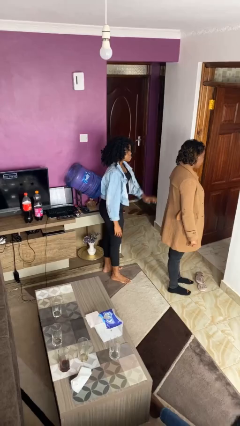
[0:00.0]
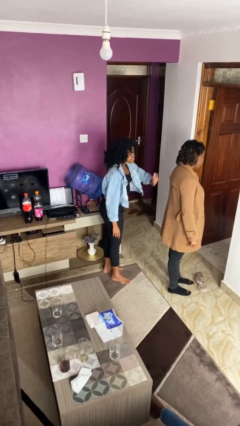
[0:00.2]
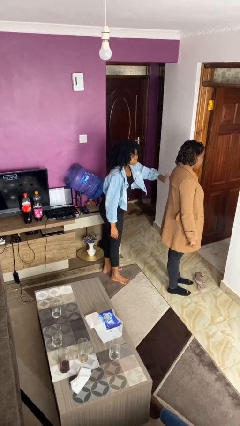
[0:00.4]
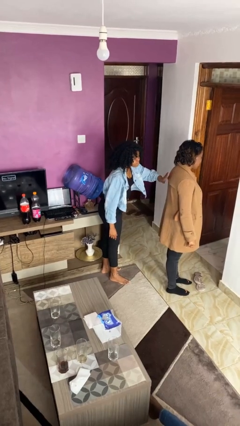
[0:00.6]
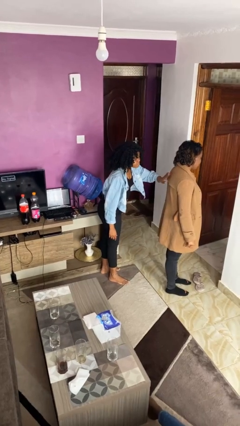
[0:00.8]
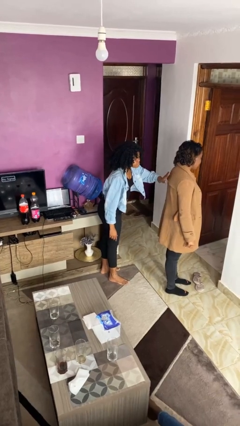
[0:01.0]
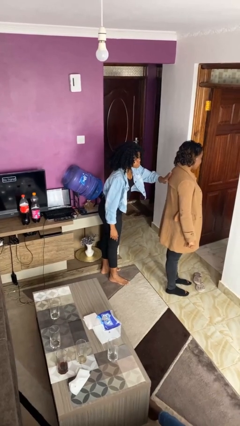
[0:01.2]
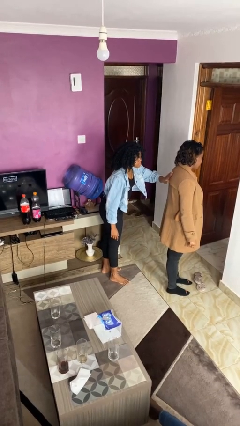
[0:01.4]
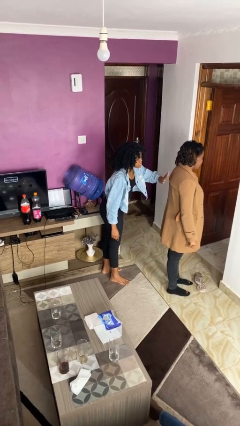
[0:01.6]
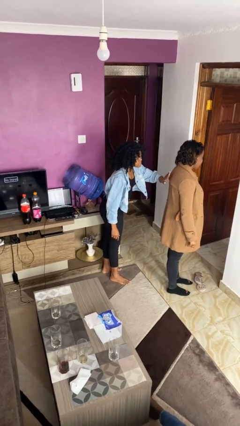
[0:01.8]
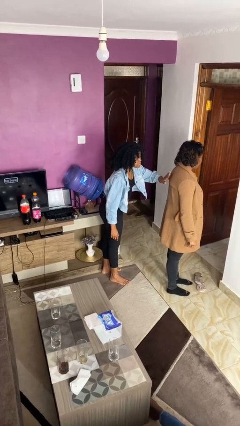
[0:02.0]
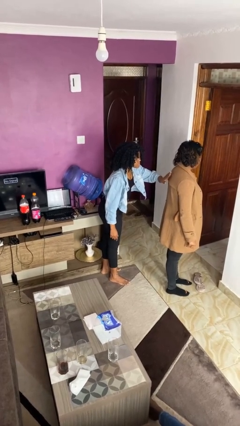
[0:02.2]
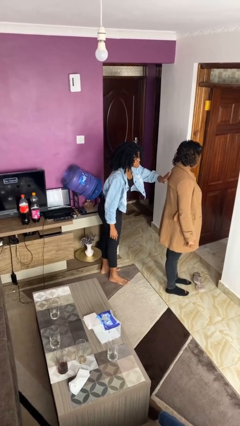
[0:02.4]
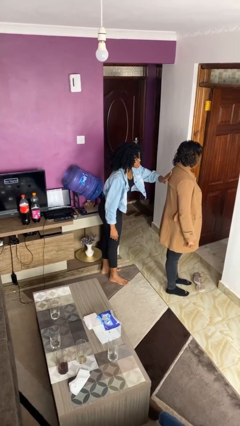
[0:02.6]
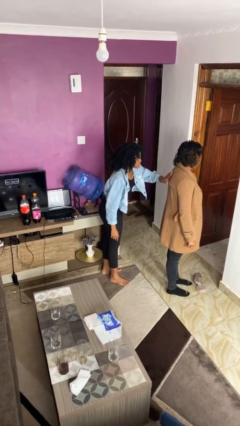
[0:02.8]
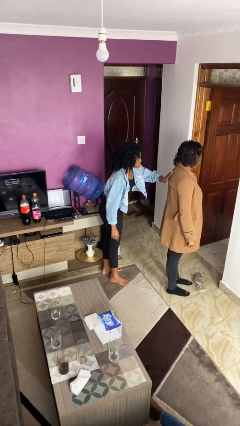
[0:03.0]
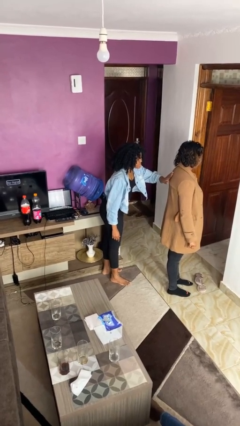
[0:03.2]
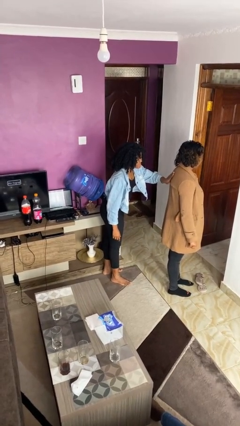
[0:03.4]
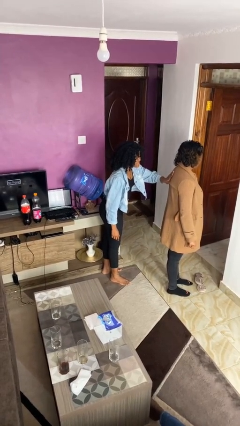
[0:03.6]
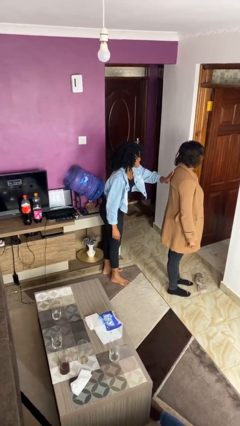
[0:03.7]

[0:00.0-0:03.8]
person touches back of person

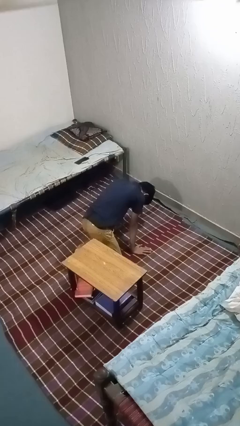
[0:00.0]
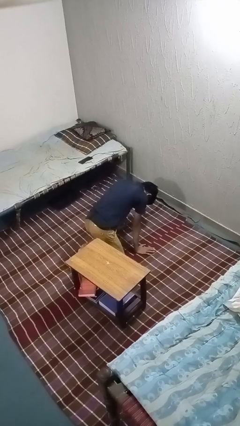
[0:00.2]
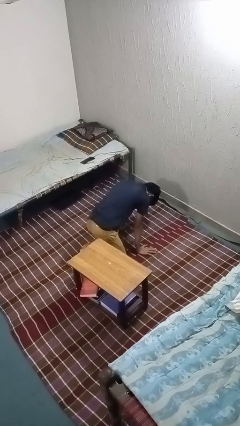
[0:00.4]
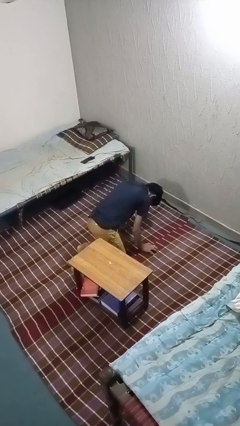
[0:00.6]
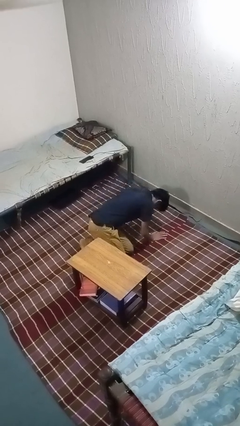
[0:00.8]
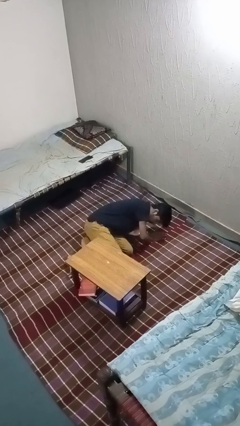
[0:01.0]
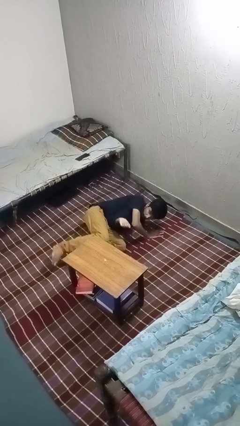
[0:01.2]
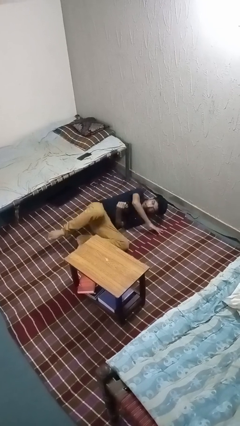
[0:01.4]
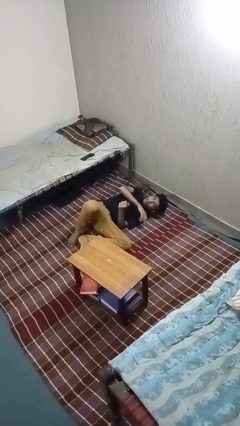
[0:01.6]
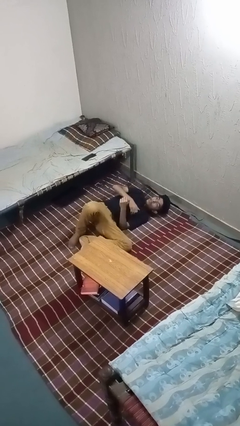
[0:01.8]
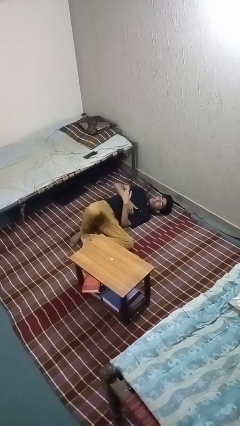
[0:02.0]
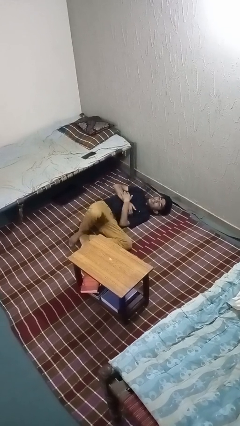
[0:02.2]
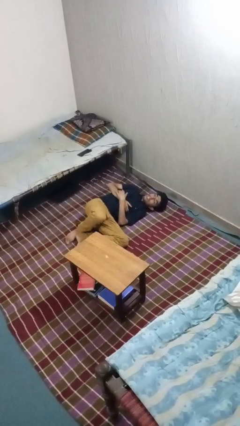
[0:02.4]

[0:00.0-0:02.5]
person lies down on floor

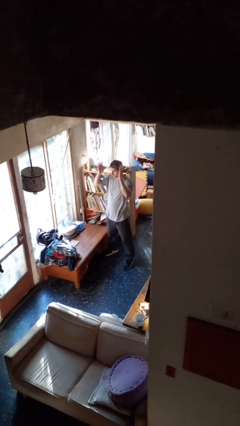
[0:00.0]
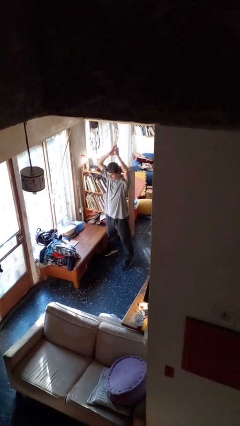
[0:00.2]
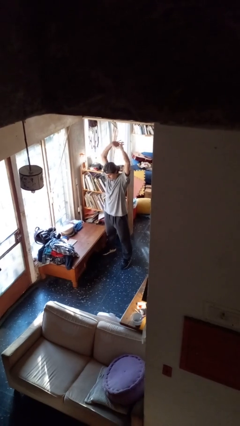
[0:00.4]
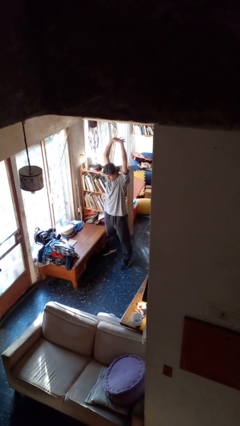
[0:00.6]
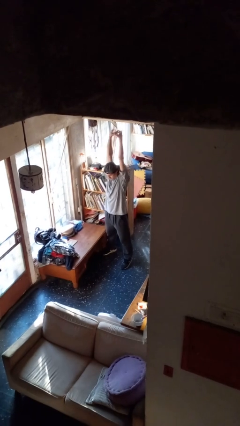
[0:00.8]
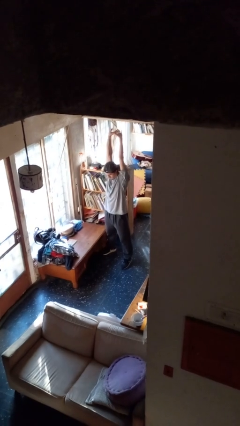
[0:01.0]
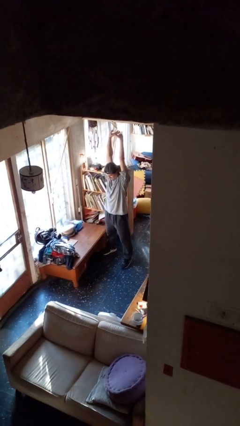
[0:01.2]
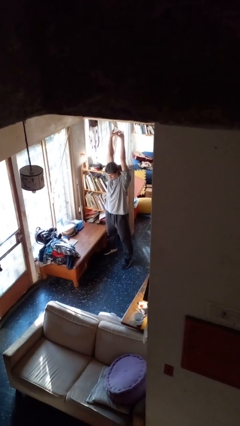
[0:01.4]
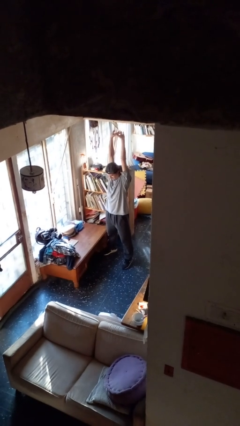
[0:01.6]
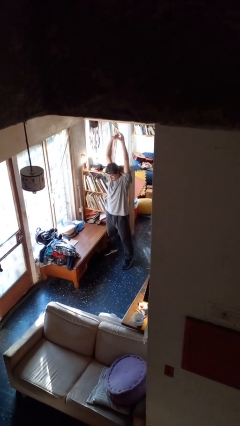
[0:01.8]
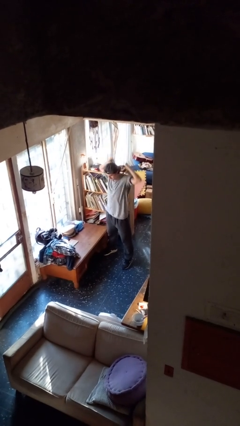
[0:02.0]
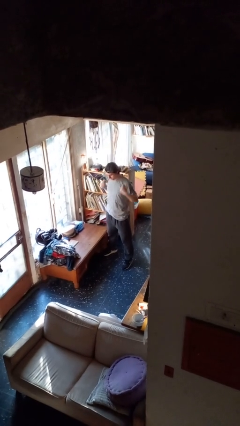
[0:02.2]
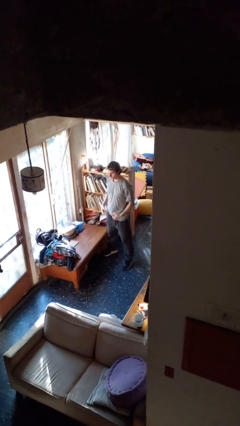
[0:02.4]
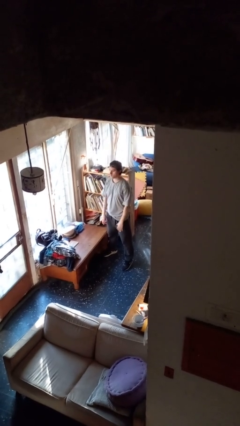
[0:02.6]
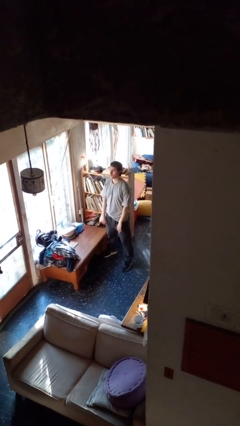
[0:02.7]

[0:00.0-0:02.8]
person stretches arms over head

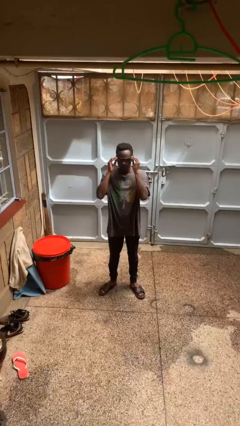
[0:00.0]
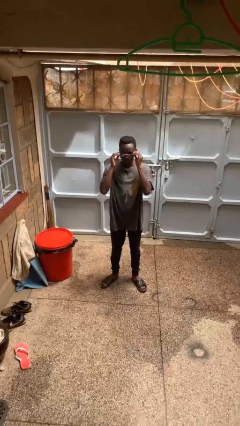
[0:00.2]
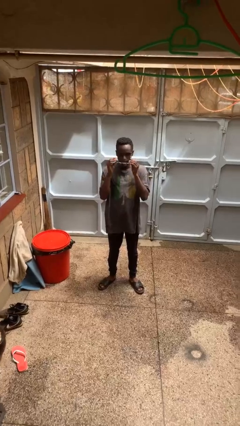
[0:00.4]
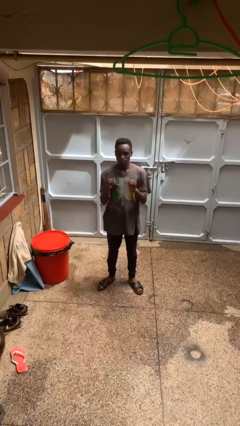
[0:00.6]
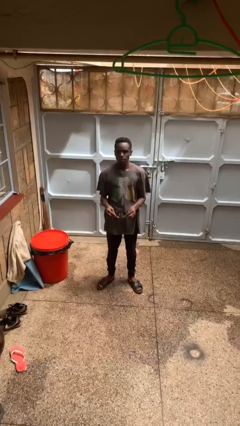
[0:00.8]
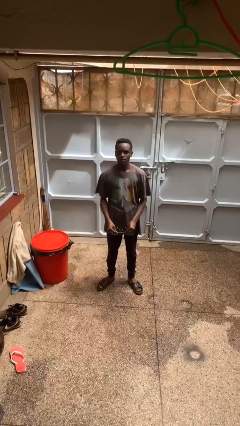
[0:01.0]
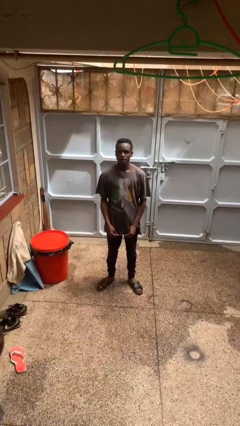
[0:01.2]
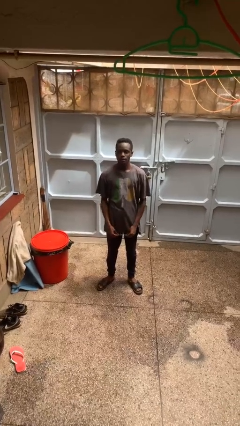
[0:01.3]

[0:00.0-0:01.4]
person takes off sunglasses

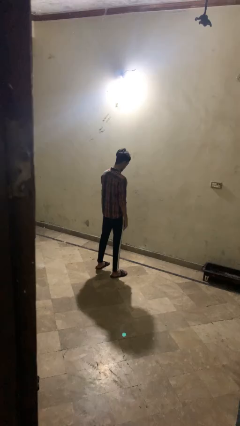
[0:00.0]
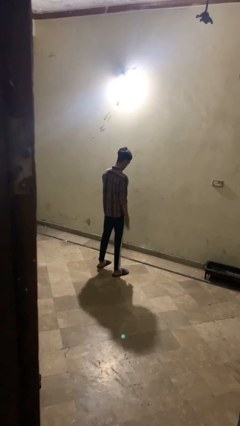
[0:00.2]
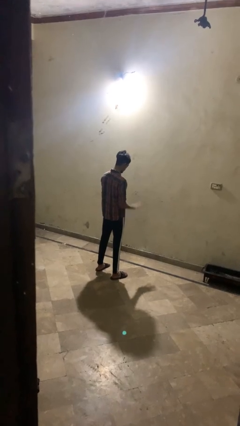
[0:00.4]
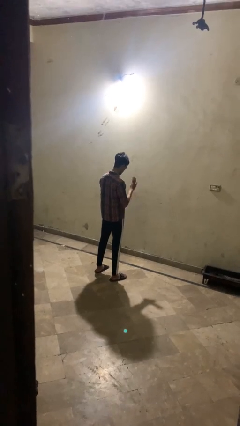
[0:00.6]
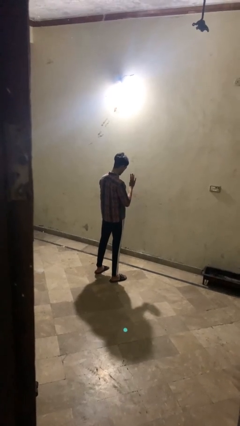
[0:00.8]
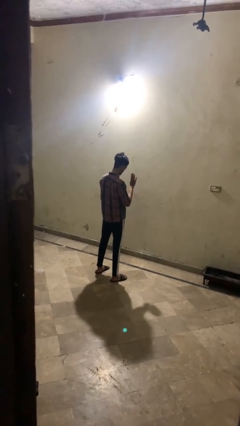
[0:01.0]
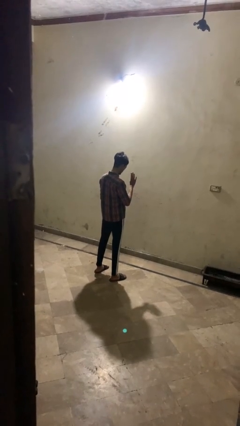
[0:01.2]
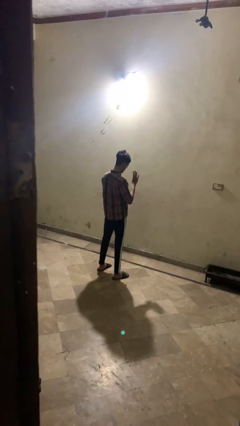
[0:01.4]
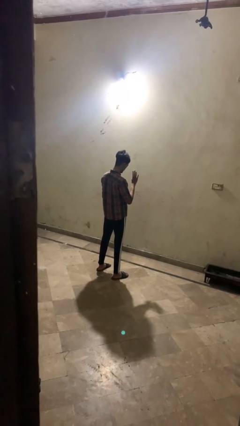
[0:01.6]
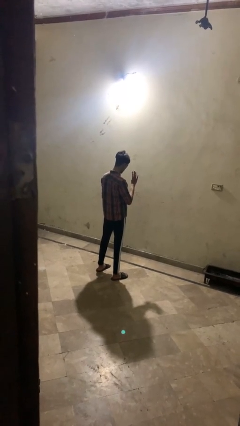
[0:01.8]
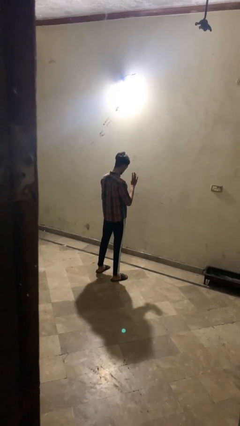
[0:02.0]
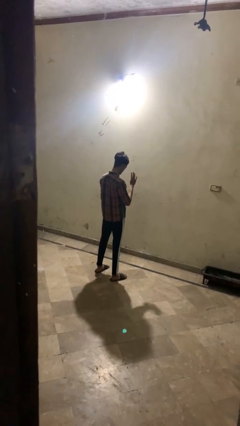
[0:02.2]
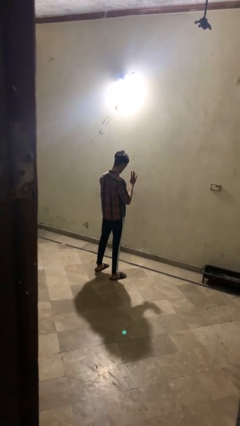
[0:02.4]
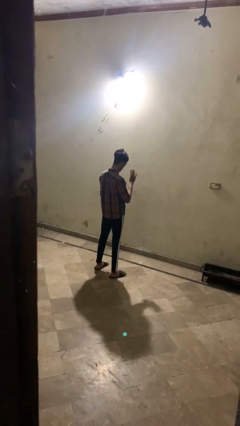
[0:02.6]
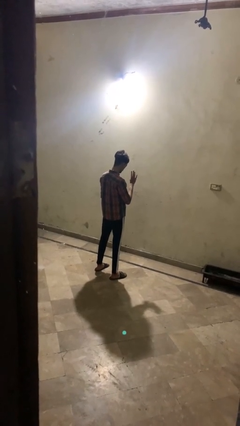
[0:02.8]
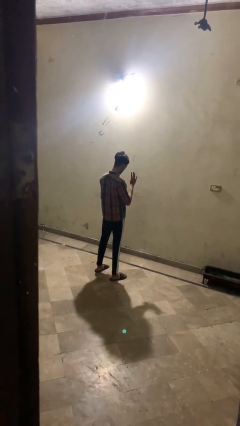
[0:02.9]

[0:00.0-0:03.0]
person gestures number four

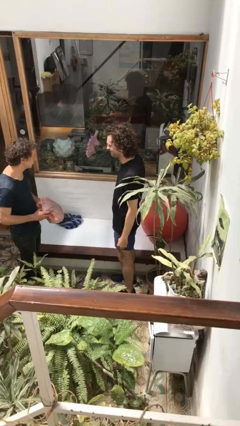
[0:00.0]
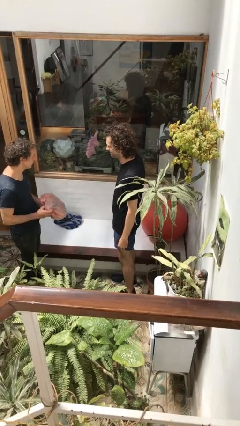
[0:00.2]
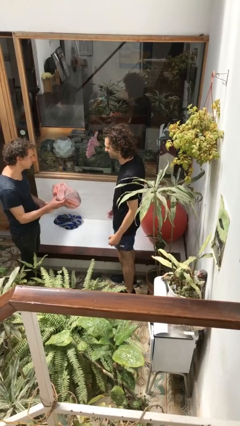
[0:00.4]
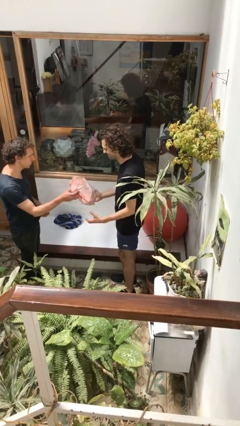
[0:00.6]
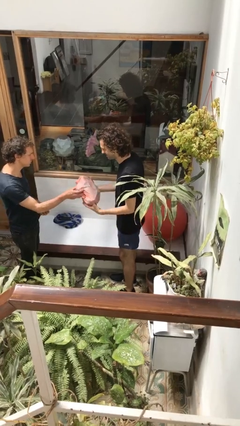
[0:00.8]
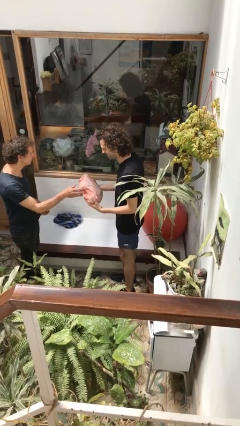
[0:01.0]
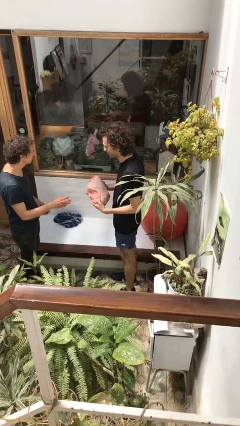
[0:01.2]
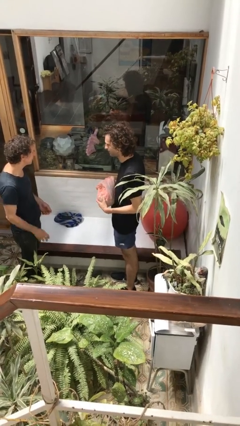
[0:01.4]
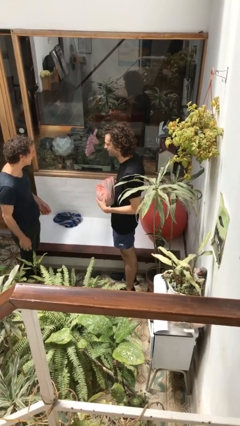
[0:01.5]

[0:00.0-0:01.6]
person transfers object to person

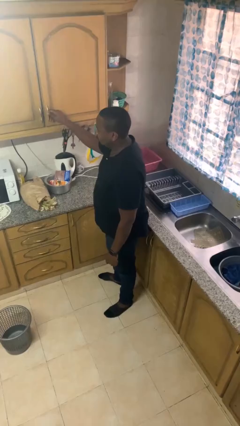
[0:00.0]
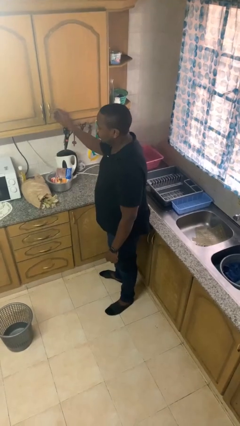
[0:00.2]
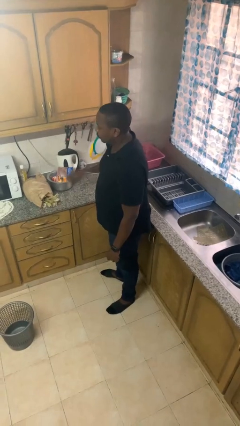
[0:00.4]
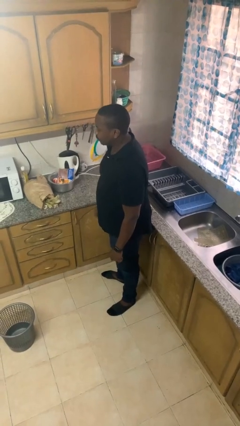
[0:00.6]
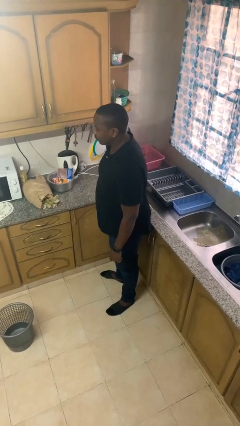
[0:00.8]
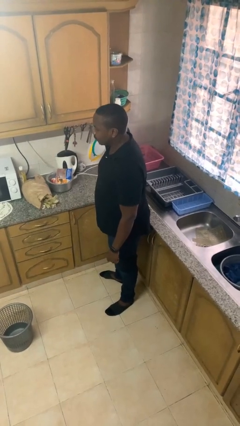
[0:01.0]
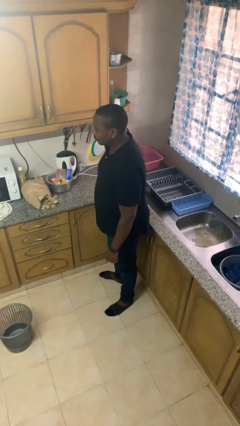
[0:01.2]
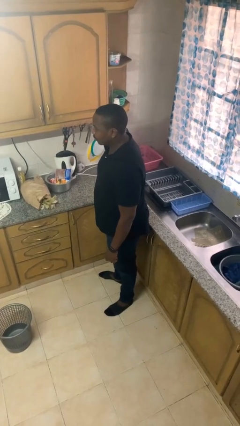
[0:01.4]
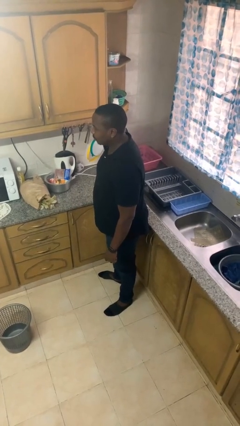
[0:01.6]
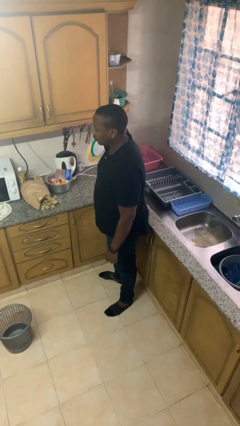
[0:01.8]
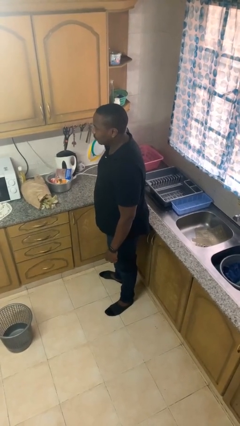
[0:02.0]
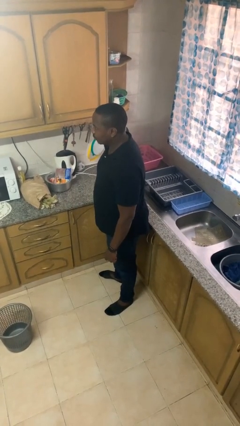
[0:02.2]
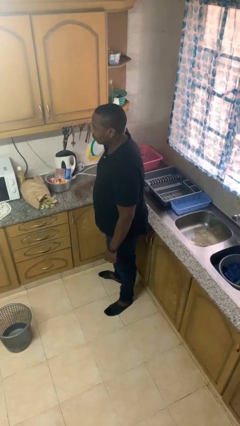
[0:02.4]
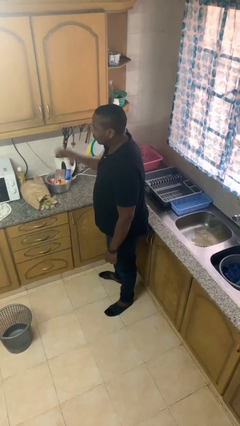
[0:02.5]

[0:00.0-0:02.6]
person closes cabinet
